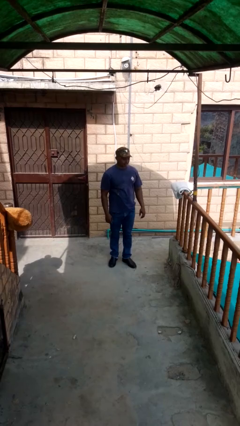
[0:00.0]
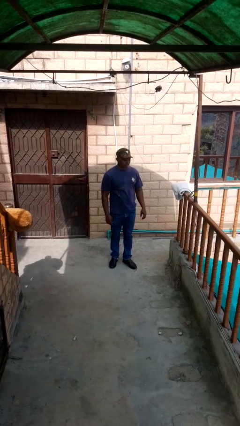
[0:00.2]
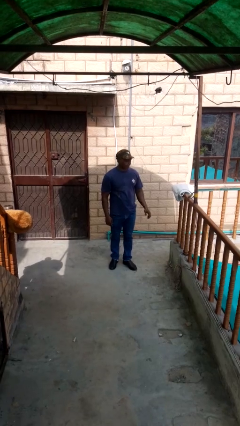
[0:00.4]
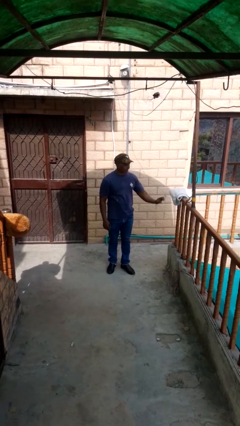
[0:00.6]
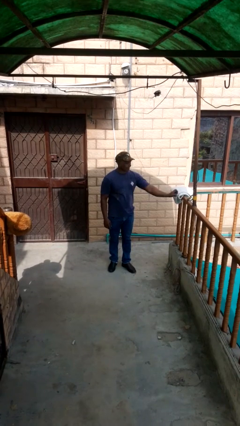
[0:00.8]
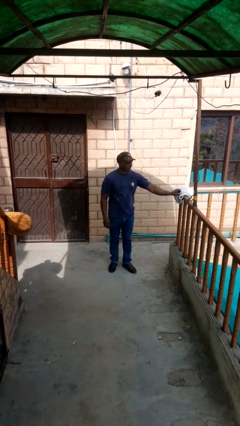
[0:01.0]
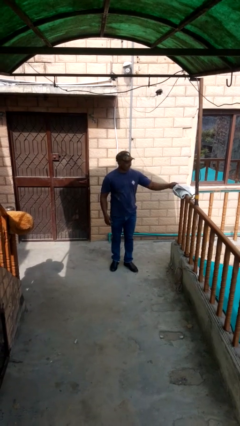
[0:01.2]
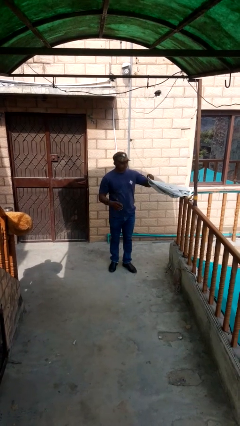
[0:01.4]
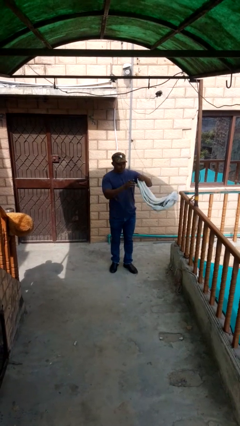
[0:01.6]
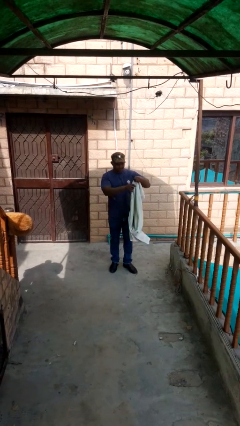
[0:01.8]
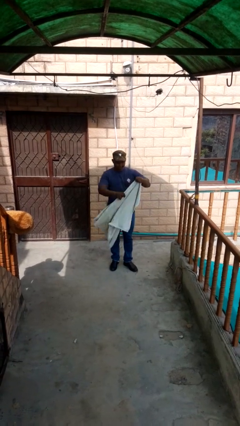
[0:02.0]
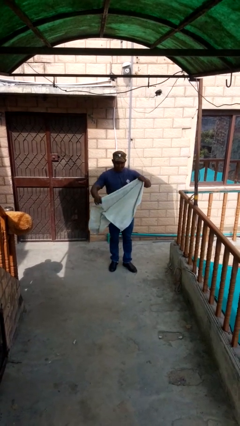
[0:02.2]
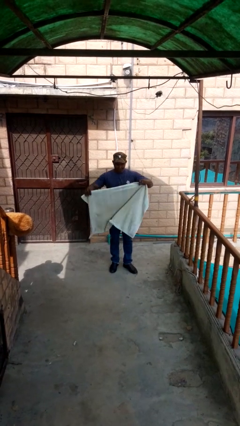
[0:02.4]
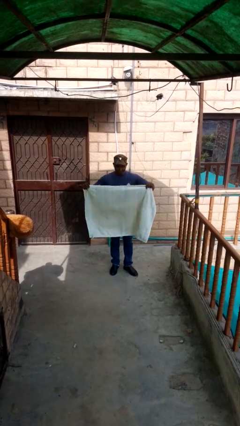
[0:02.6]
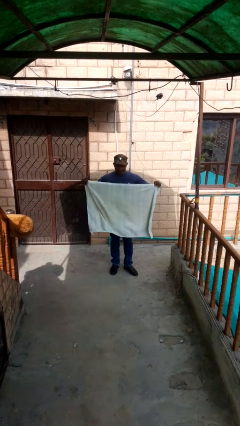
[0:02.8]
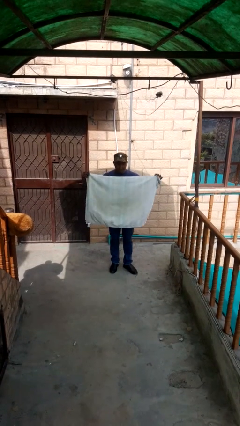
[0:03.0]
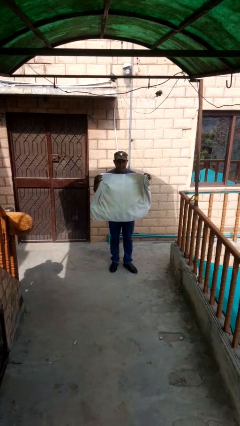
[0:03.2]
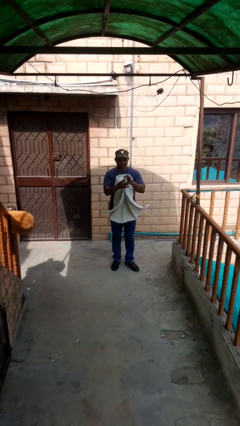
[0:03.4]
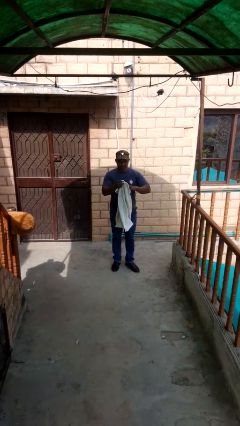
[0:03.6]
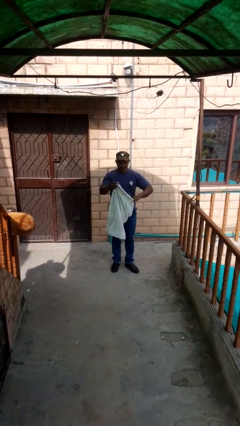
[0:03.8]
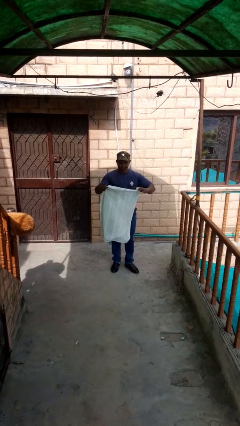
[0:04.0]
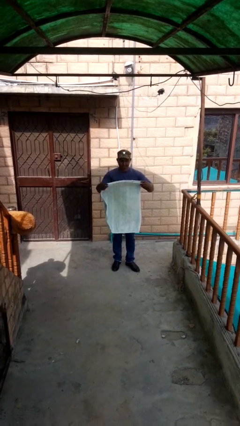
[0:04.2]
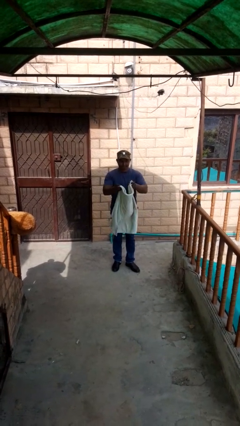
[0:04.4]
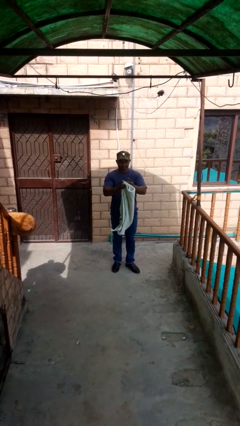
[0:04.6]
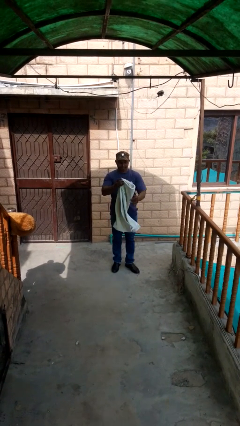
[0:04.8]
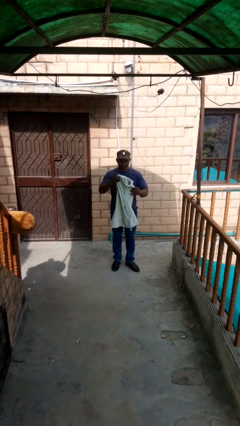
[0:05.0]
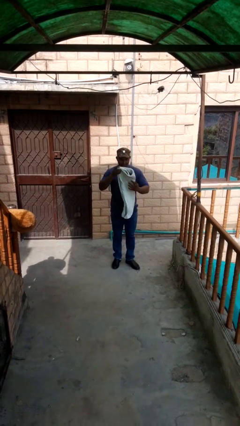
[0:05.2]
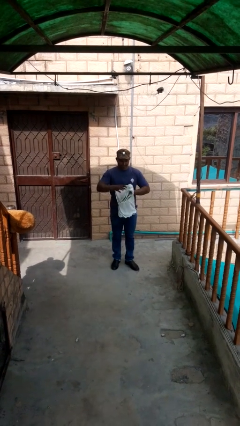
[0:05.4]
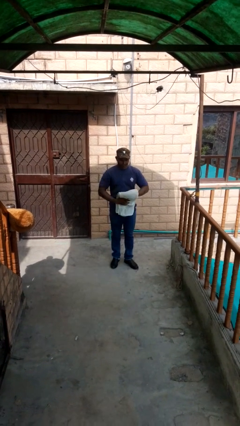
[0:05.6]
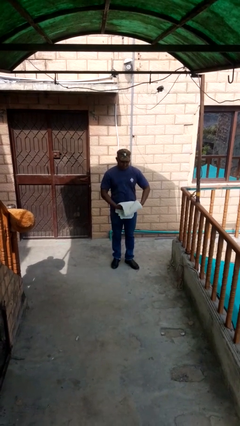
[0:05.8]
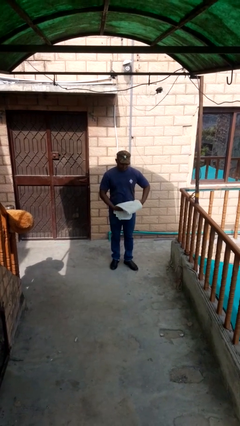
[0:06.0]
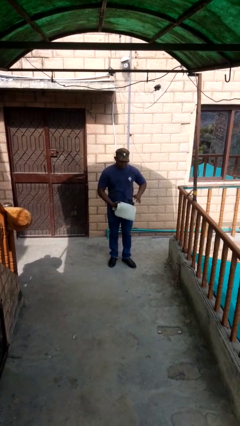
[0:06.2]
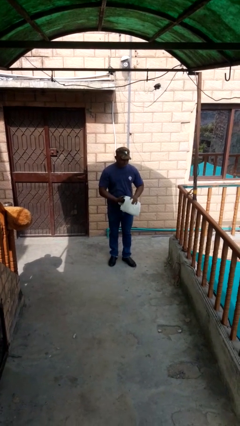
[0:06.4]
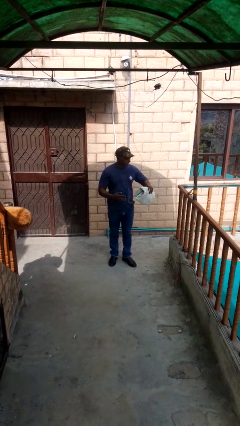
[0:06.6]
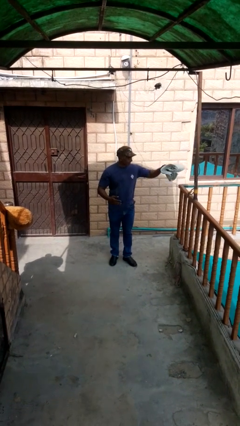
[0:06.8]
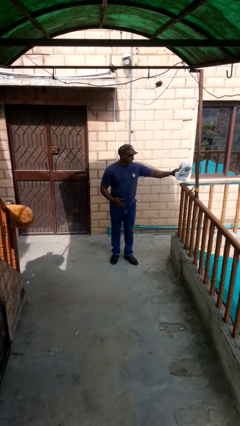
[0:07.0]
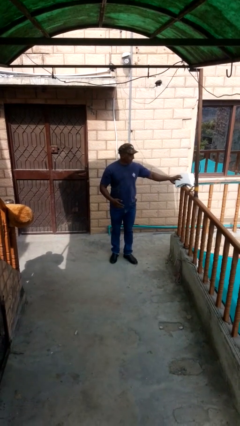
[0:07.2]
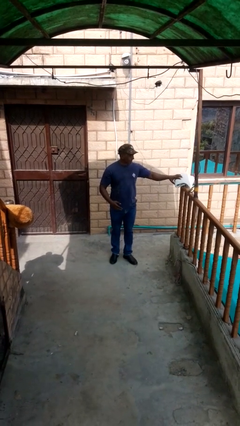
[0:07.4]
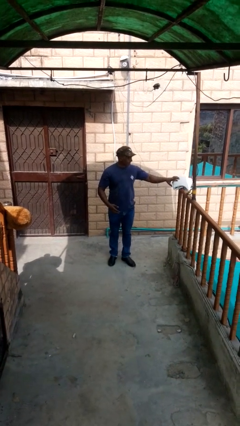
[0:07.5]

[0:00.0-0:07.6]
person folds towel

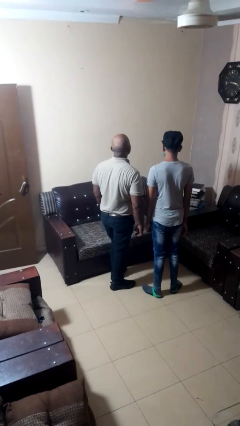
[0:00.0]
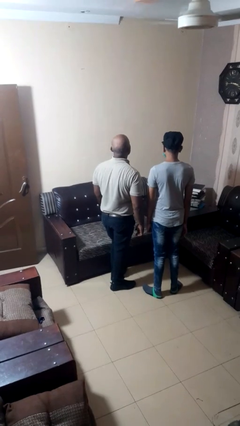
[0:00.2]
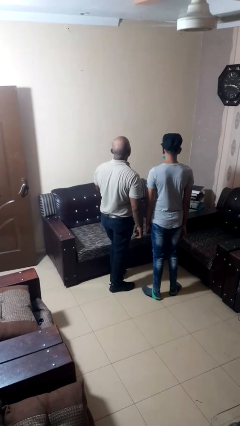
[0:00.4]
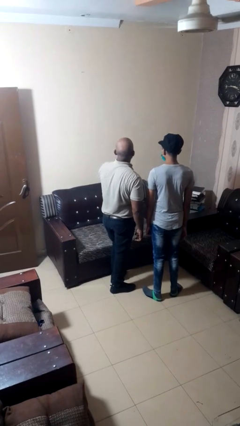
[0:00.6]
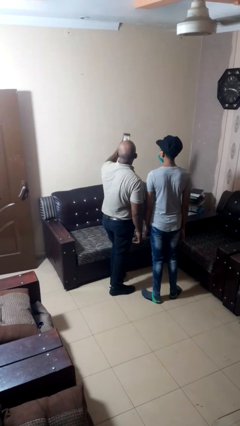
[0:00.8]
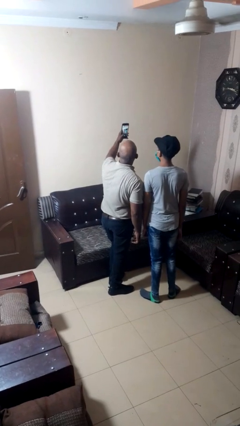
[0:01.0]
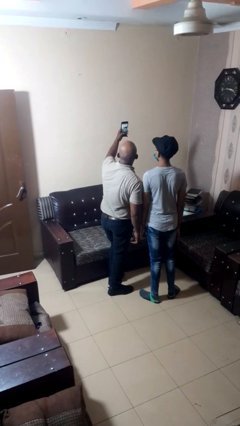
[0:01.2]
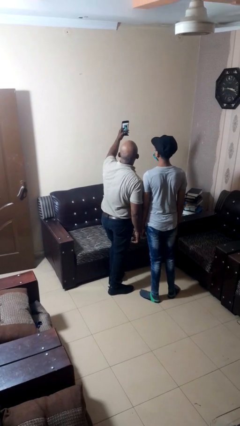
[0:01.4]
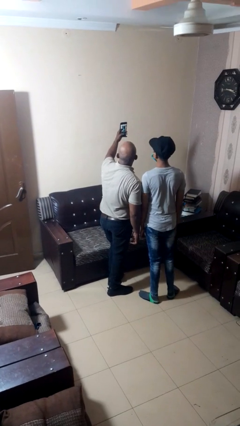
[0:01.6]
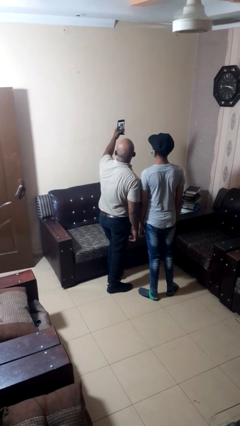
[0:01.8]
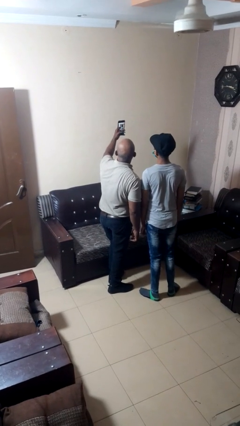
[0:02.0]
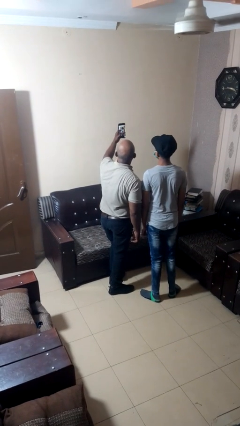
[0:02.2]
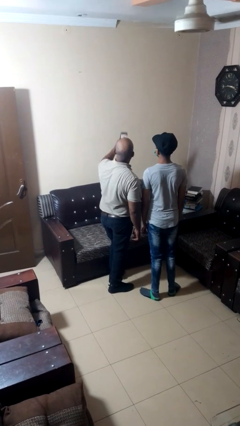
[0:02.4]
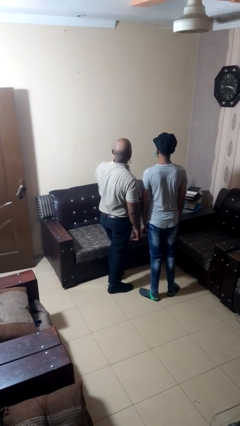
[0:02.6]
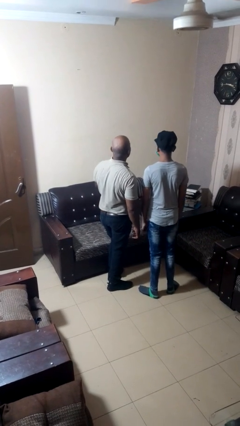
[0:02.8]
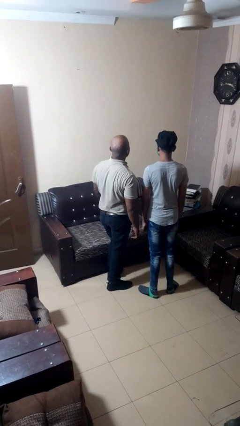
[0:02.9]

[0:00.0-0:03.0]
person takes selfie with person

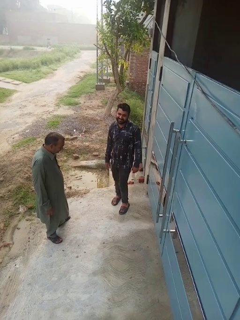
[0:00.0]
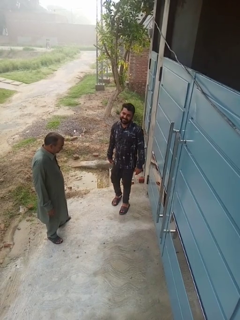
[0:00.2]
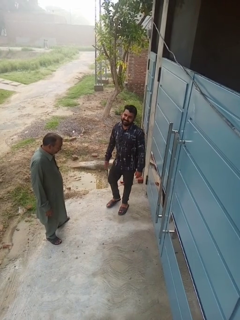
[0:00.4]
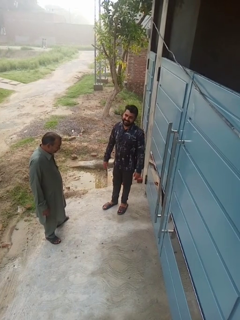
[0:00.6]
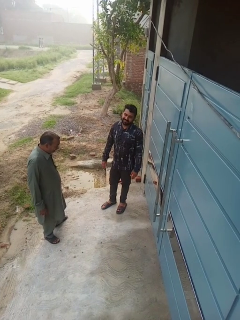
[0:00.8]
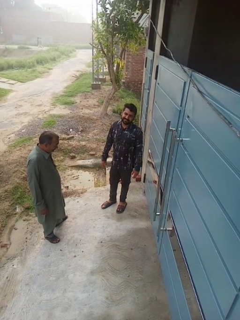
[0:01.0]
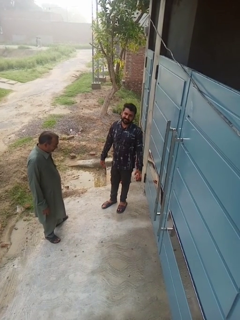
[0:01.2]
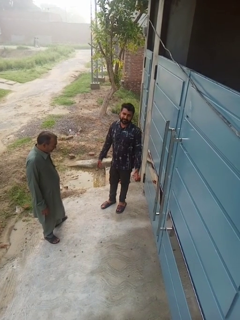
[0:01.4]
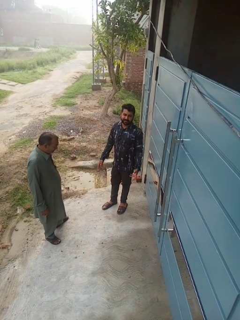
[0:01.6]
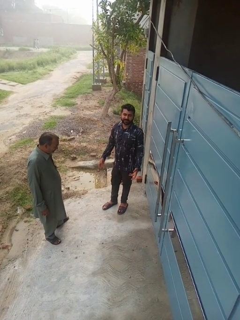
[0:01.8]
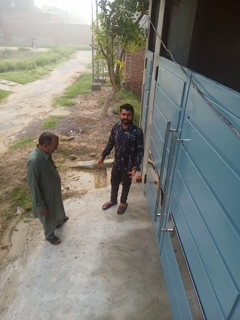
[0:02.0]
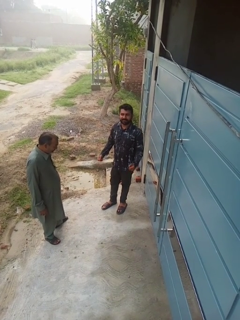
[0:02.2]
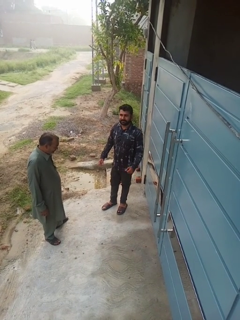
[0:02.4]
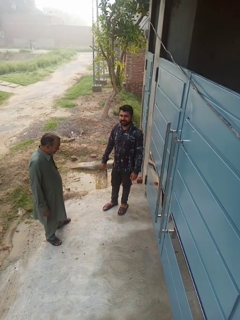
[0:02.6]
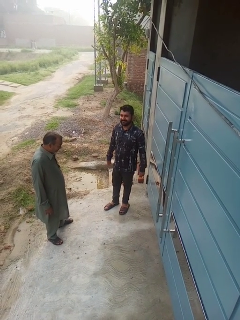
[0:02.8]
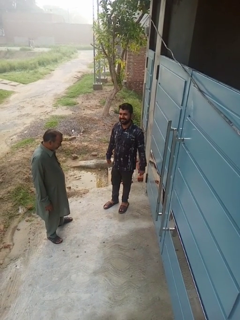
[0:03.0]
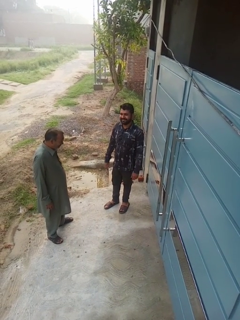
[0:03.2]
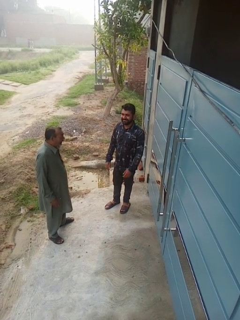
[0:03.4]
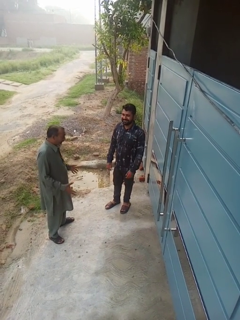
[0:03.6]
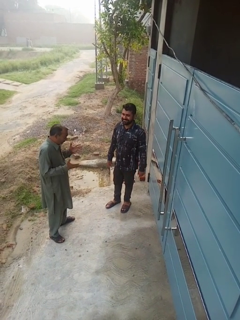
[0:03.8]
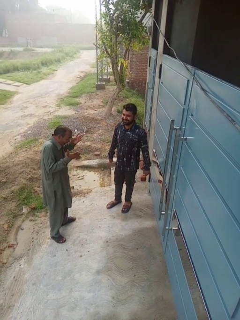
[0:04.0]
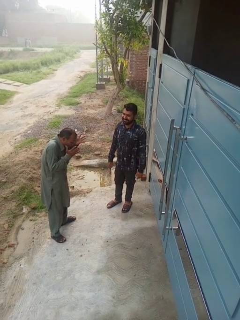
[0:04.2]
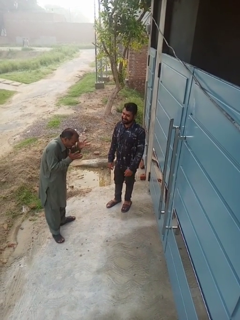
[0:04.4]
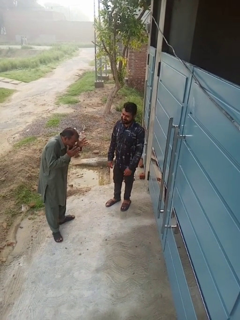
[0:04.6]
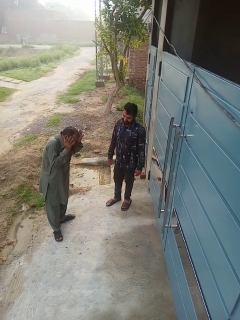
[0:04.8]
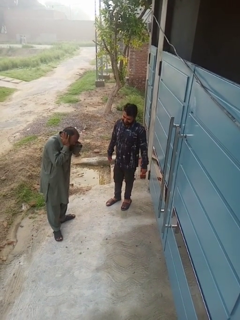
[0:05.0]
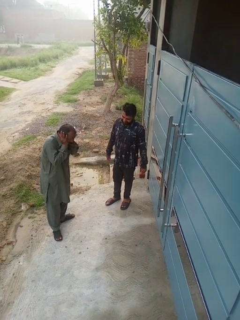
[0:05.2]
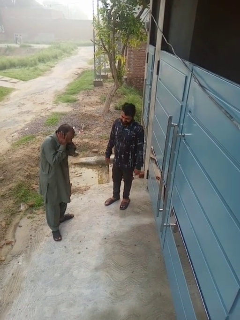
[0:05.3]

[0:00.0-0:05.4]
person laughs with person

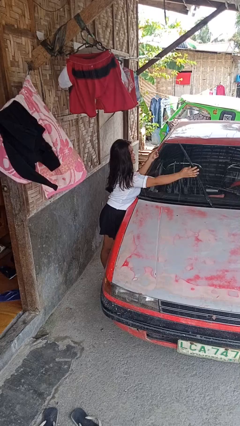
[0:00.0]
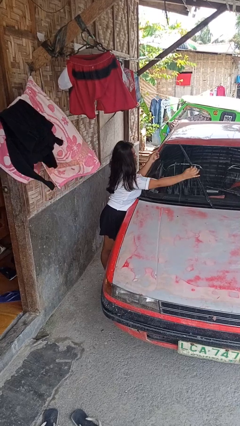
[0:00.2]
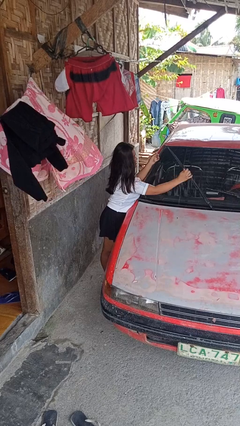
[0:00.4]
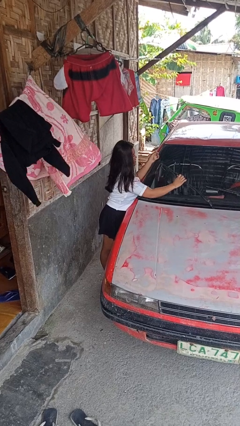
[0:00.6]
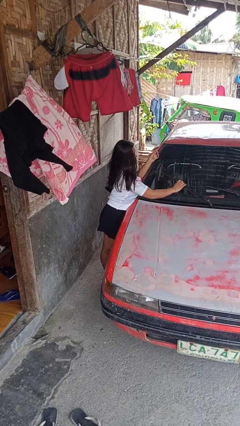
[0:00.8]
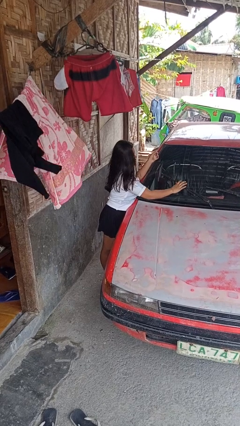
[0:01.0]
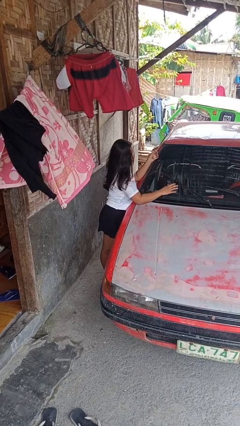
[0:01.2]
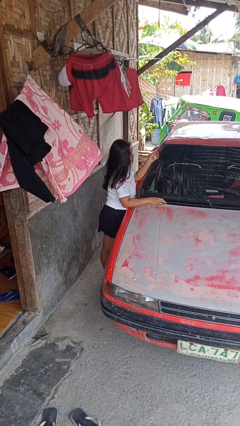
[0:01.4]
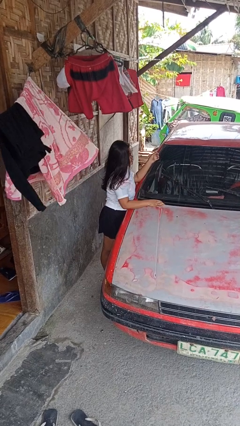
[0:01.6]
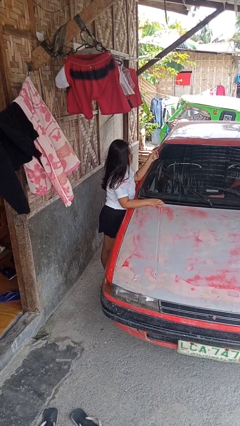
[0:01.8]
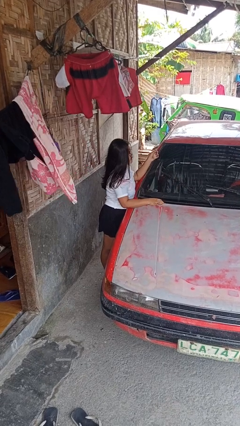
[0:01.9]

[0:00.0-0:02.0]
person flips down car wipers

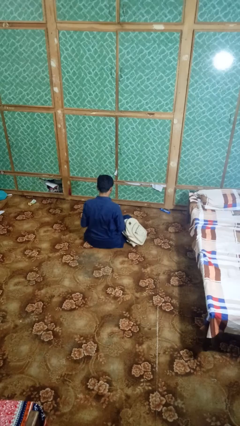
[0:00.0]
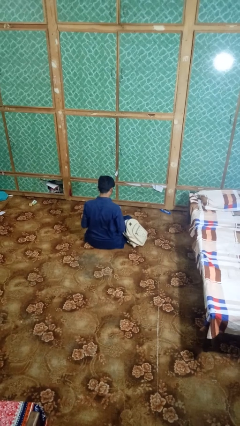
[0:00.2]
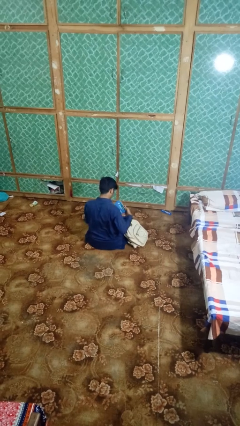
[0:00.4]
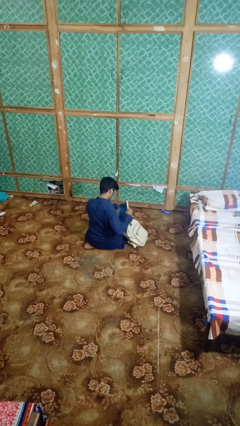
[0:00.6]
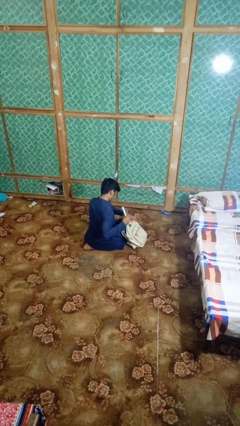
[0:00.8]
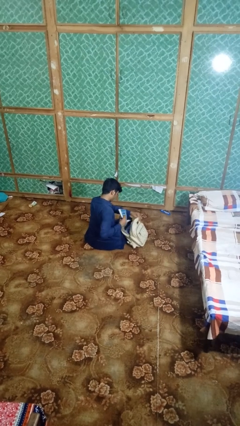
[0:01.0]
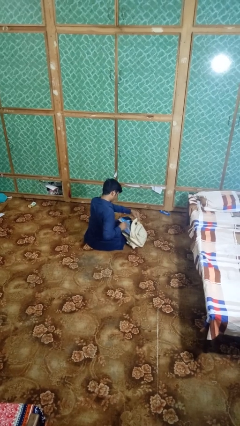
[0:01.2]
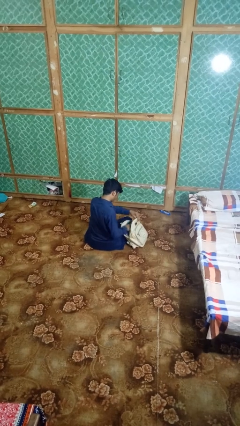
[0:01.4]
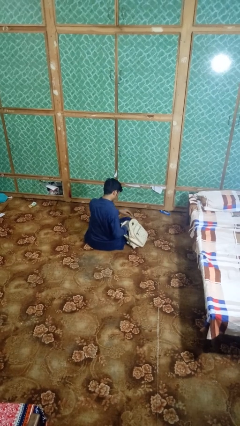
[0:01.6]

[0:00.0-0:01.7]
person puts object into backpack
